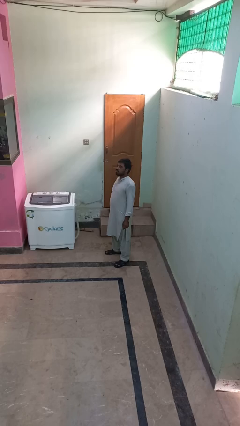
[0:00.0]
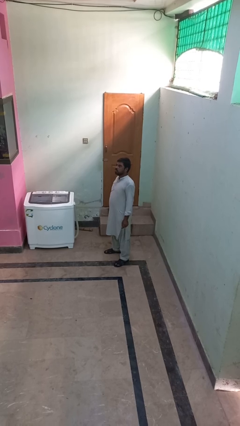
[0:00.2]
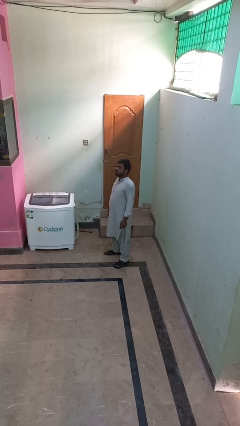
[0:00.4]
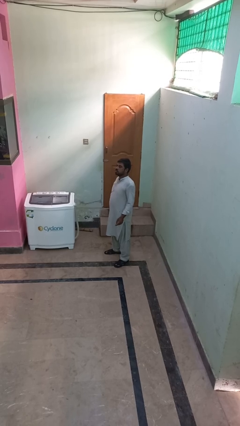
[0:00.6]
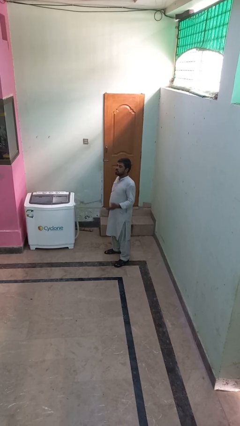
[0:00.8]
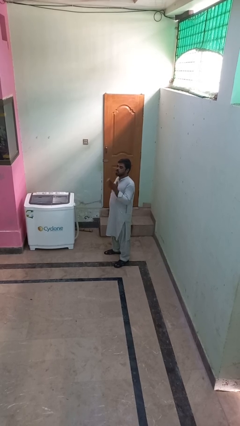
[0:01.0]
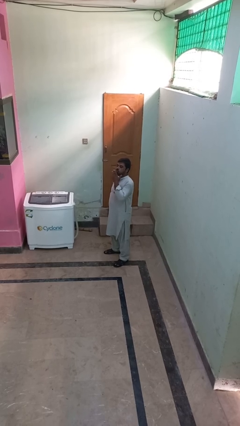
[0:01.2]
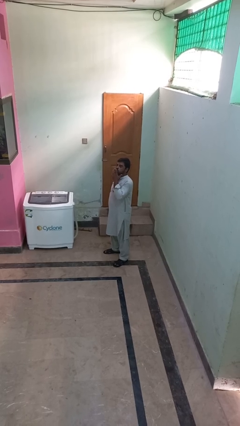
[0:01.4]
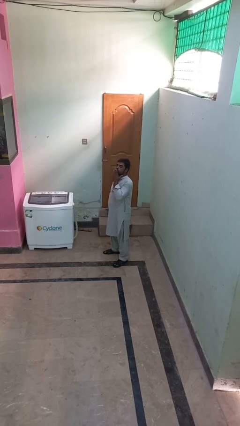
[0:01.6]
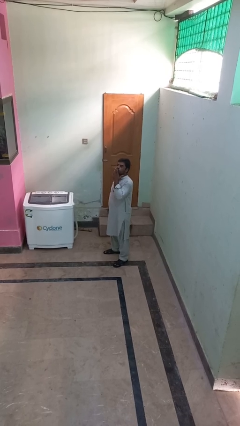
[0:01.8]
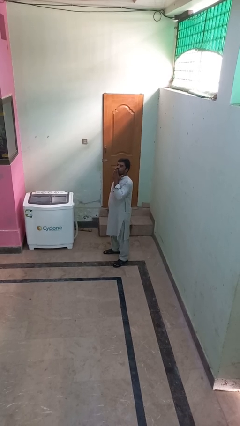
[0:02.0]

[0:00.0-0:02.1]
person vapes

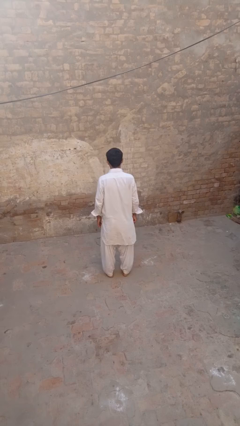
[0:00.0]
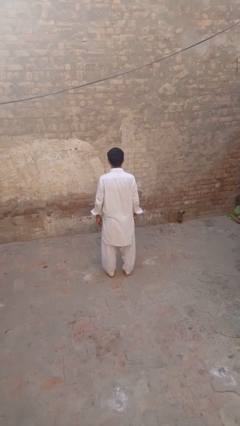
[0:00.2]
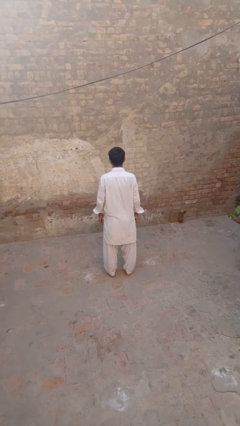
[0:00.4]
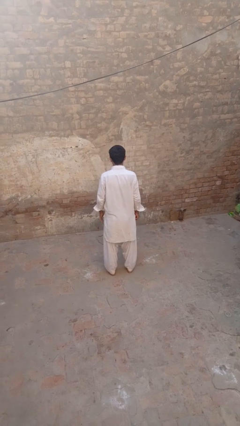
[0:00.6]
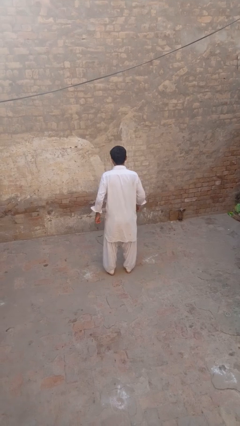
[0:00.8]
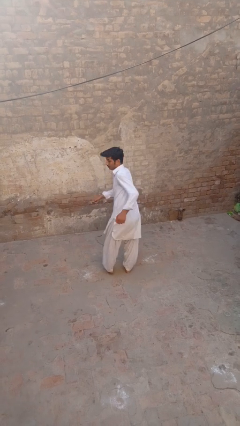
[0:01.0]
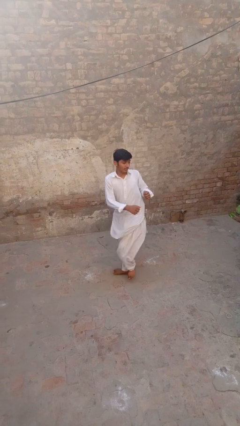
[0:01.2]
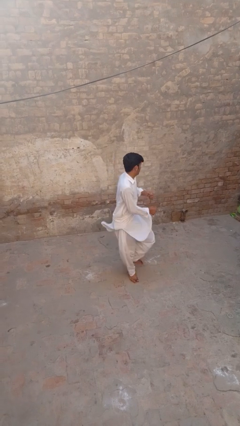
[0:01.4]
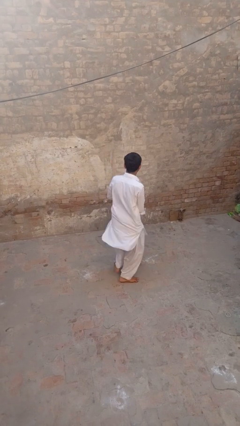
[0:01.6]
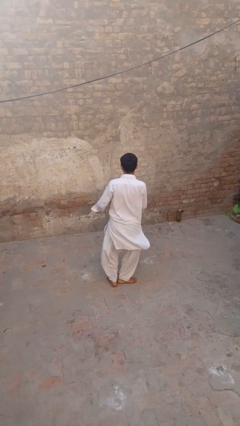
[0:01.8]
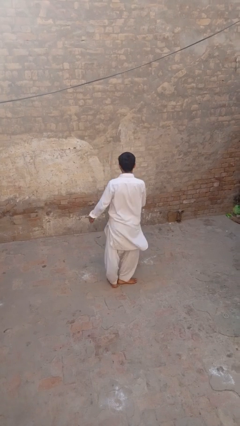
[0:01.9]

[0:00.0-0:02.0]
person twirls

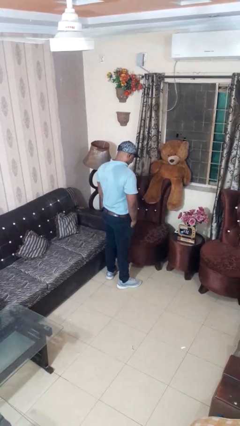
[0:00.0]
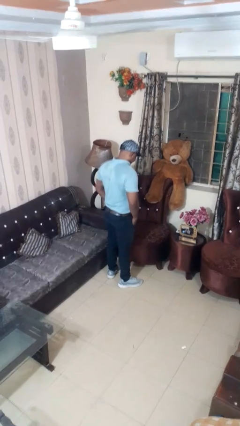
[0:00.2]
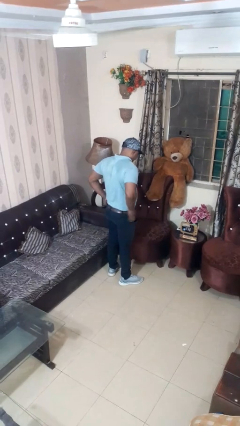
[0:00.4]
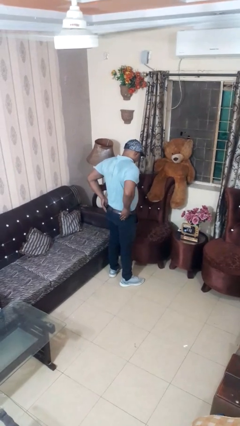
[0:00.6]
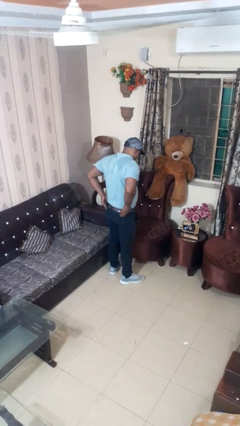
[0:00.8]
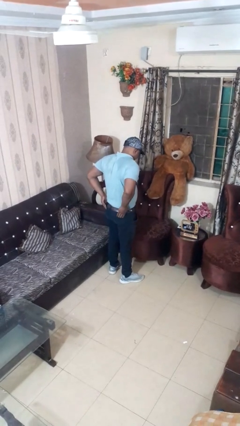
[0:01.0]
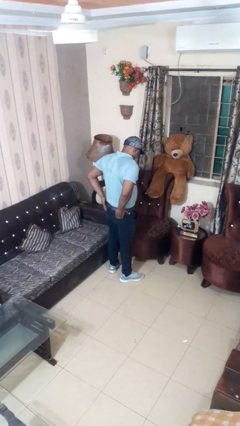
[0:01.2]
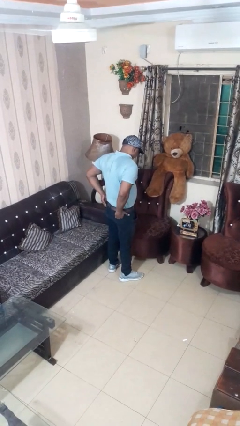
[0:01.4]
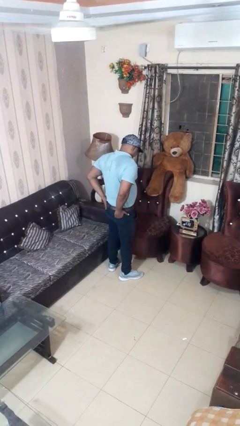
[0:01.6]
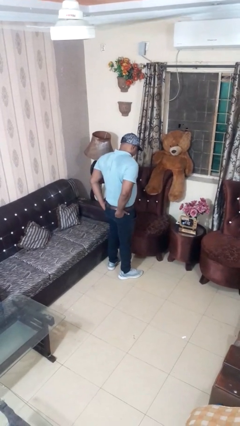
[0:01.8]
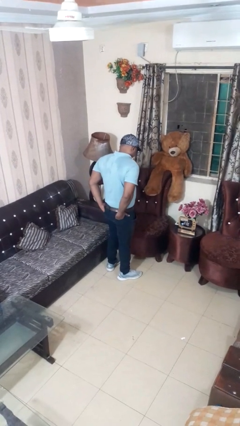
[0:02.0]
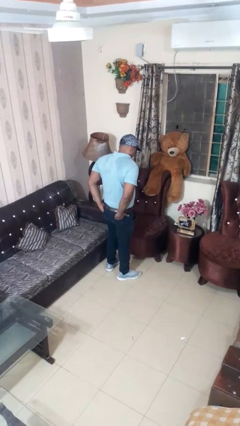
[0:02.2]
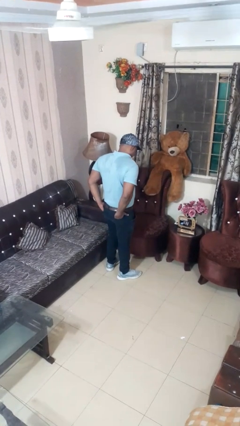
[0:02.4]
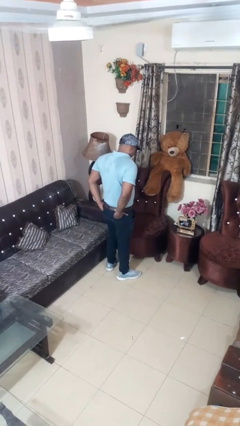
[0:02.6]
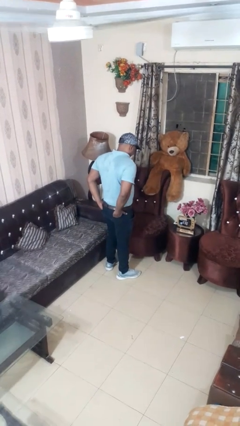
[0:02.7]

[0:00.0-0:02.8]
person puts hands in back pockets

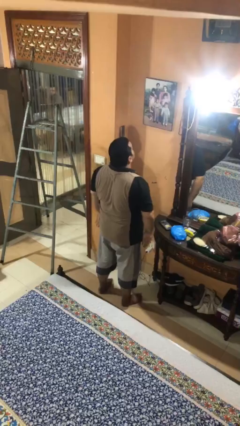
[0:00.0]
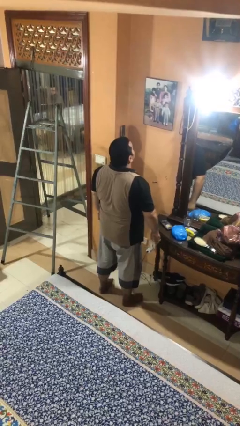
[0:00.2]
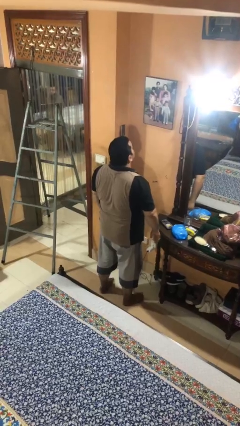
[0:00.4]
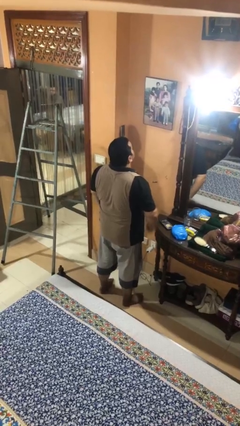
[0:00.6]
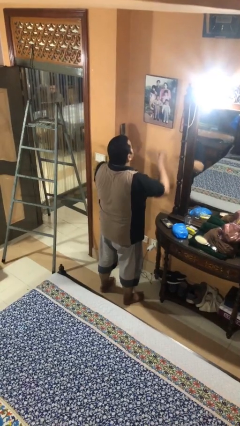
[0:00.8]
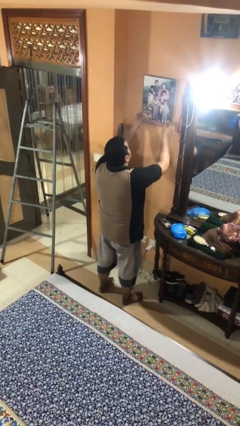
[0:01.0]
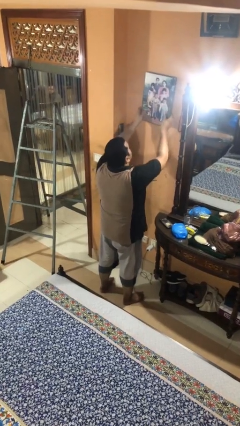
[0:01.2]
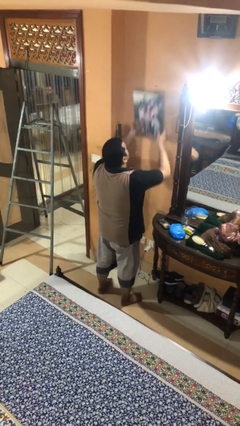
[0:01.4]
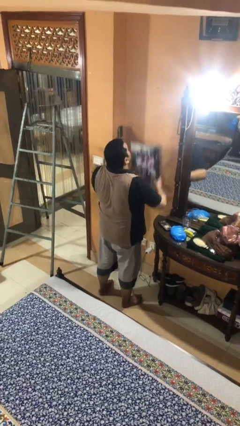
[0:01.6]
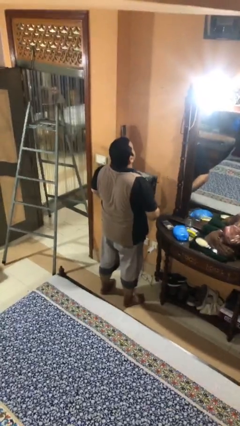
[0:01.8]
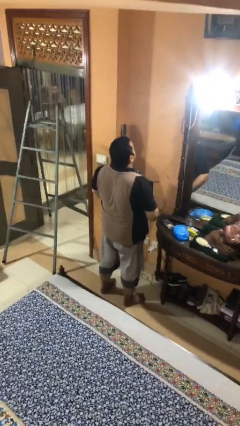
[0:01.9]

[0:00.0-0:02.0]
person takes down picture frame

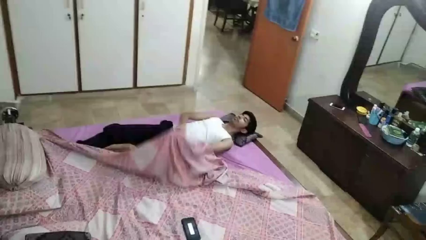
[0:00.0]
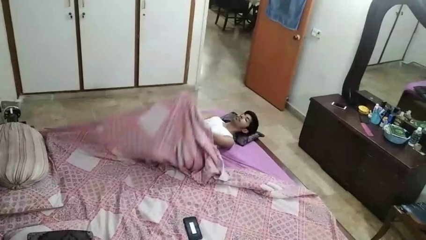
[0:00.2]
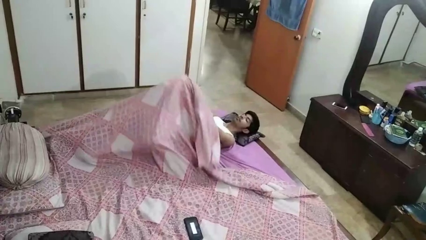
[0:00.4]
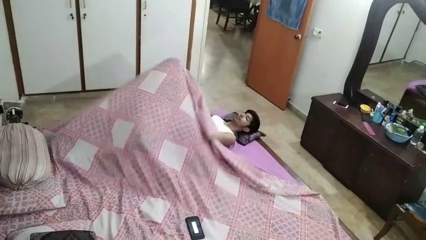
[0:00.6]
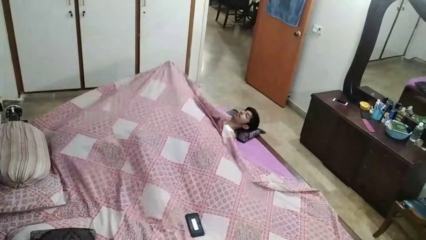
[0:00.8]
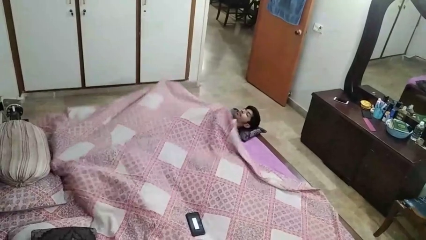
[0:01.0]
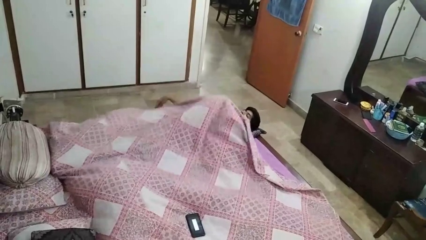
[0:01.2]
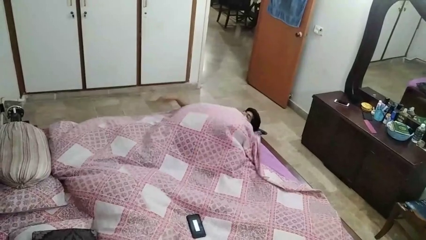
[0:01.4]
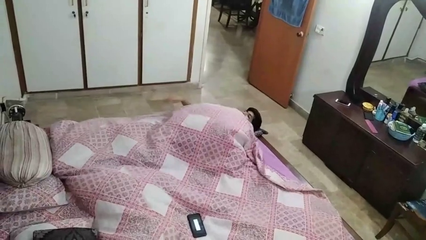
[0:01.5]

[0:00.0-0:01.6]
person covers with bedsheets

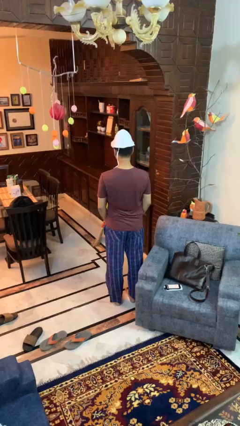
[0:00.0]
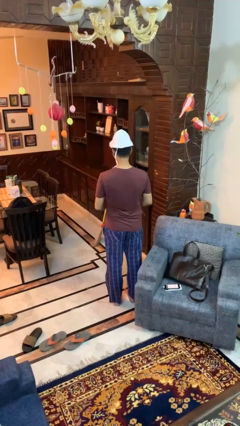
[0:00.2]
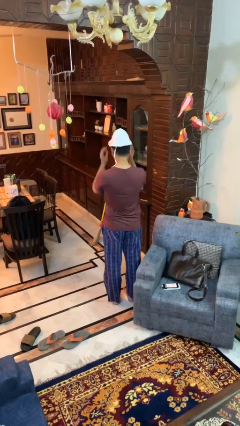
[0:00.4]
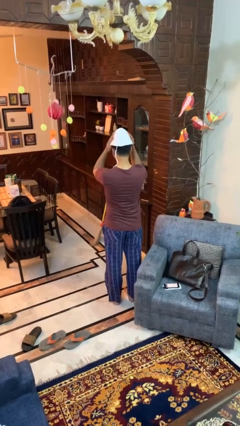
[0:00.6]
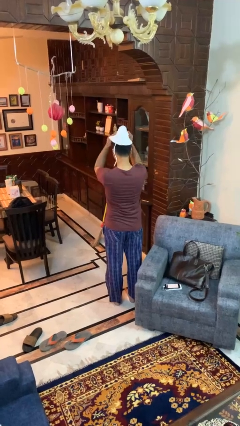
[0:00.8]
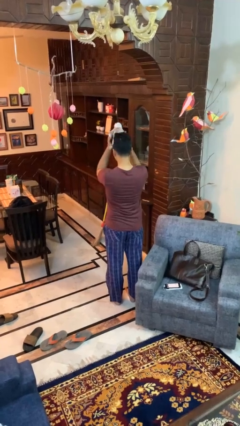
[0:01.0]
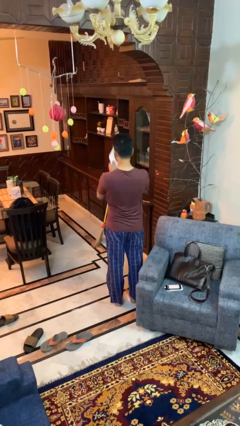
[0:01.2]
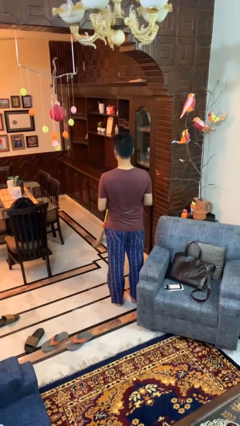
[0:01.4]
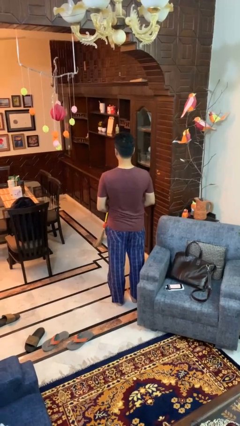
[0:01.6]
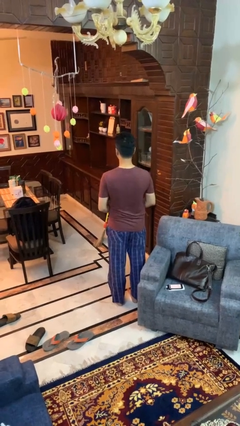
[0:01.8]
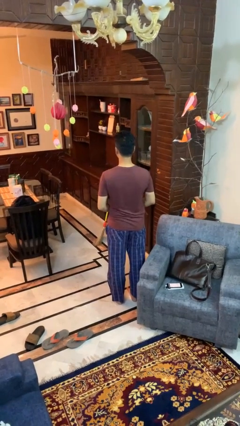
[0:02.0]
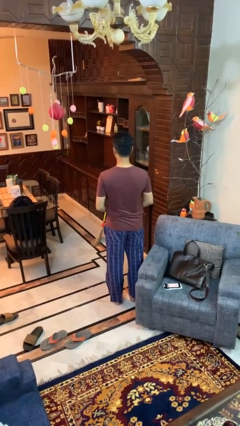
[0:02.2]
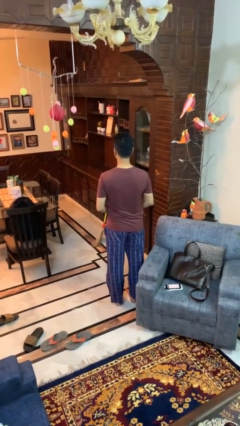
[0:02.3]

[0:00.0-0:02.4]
person takes off hat

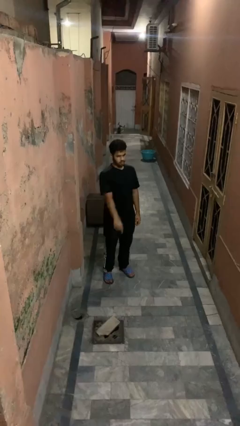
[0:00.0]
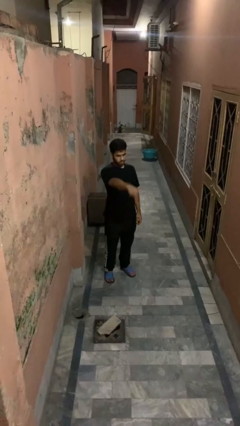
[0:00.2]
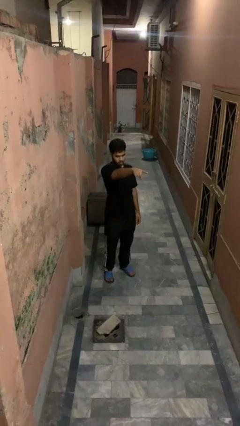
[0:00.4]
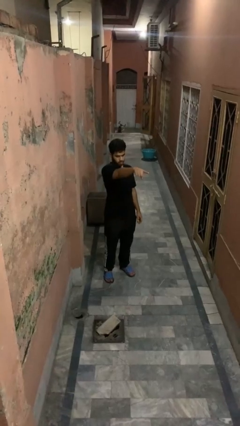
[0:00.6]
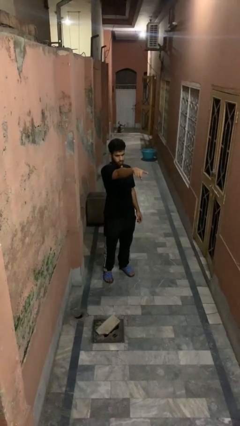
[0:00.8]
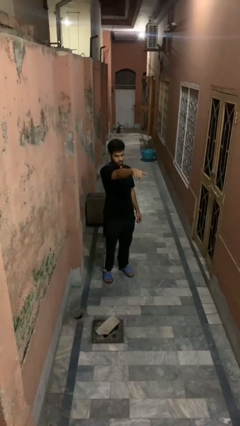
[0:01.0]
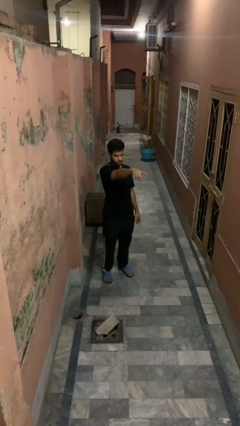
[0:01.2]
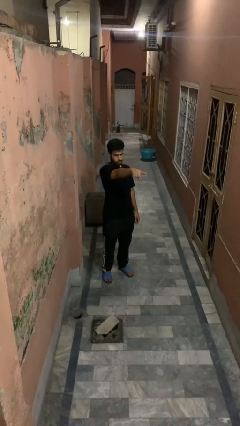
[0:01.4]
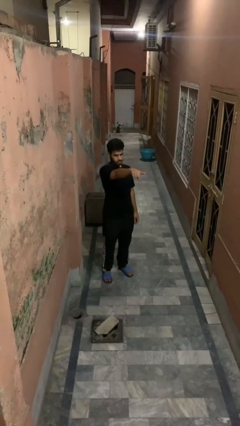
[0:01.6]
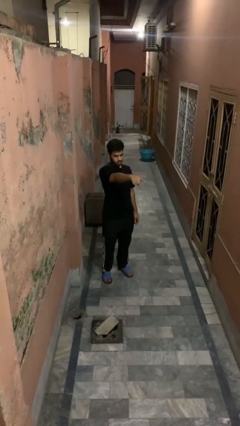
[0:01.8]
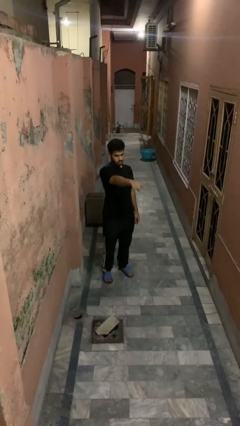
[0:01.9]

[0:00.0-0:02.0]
person points at person

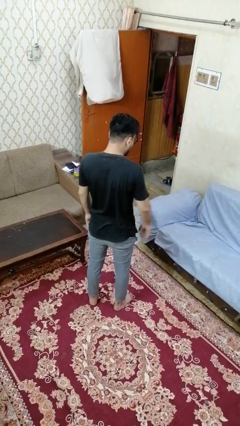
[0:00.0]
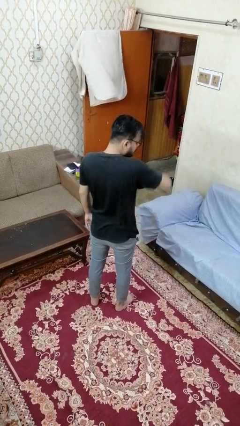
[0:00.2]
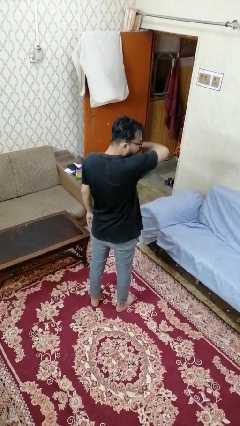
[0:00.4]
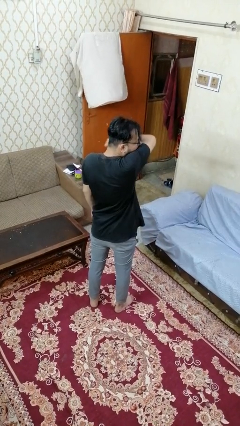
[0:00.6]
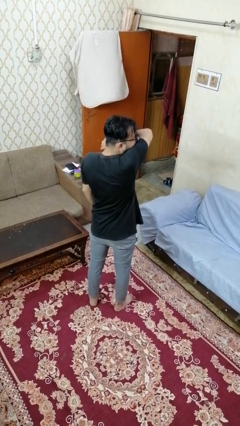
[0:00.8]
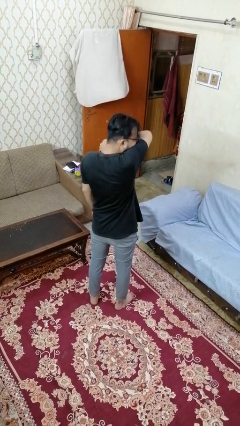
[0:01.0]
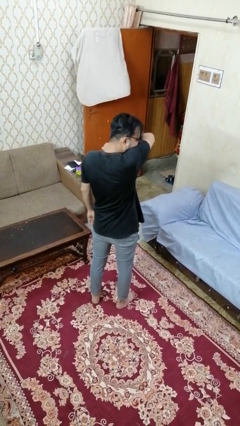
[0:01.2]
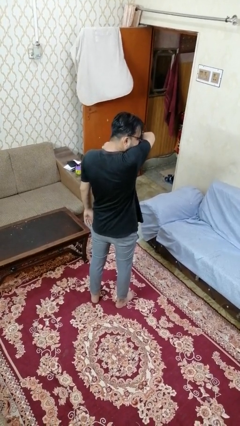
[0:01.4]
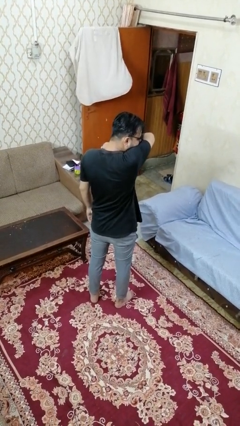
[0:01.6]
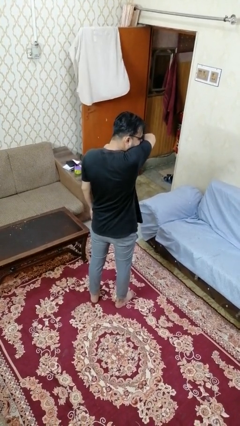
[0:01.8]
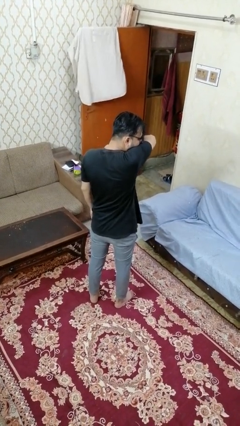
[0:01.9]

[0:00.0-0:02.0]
person sneezes into arm

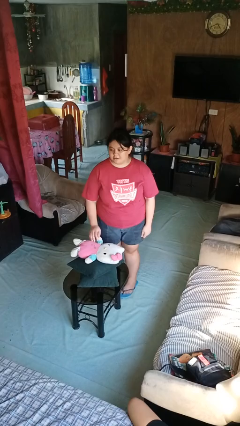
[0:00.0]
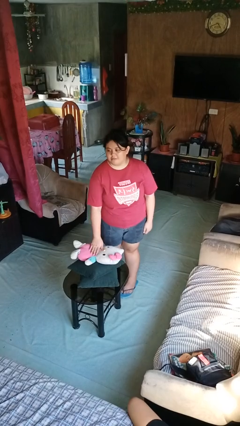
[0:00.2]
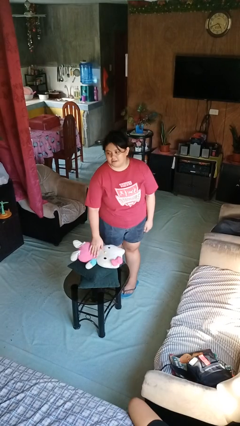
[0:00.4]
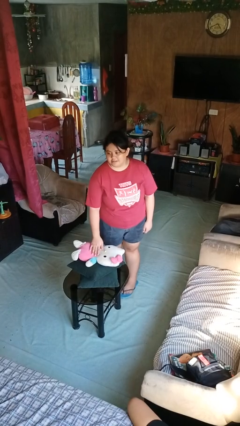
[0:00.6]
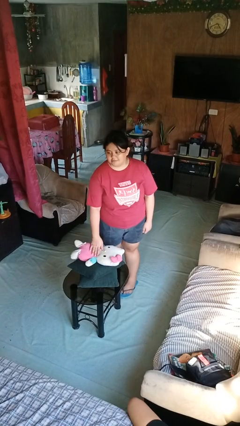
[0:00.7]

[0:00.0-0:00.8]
person taps object with finger
